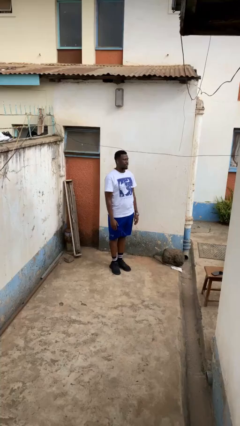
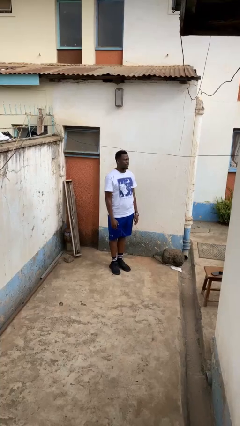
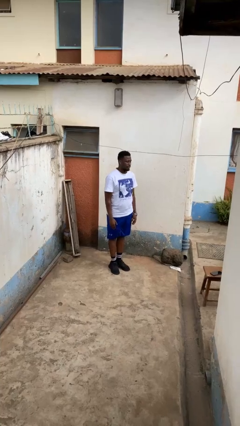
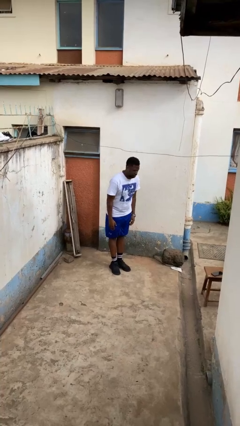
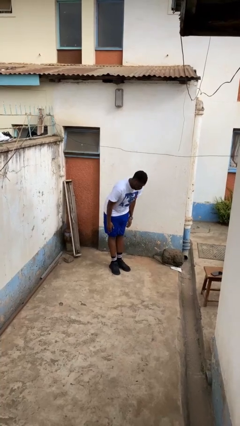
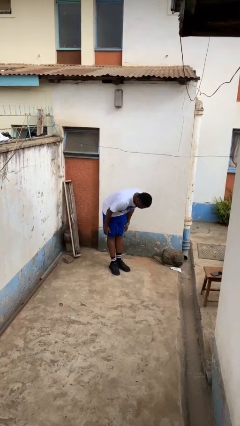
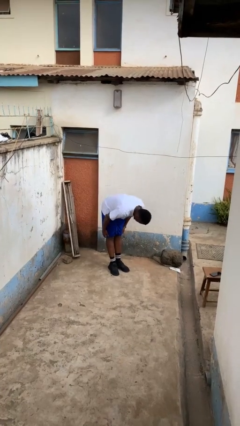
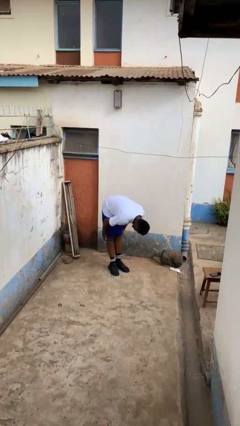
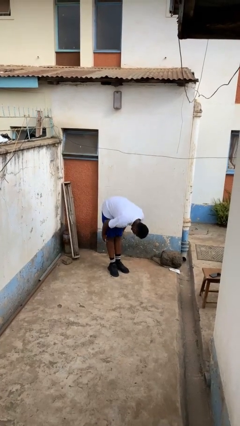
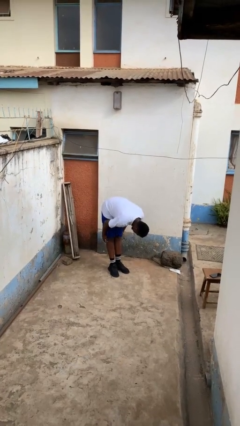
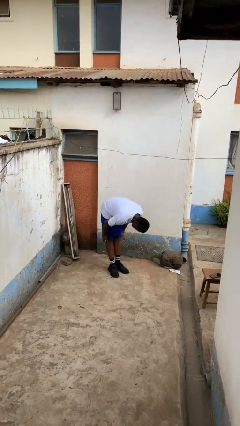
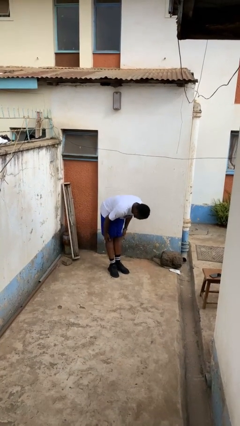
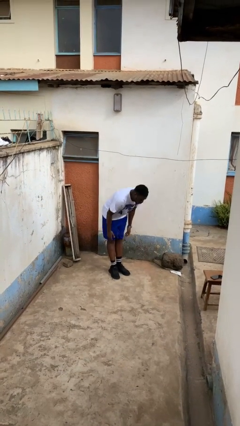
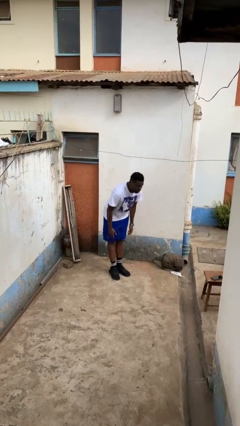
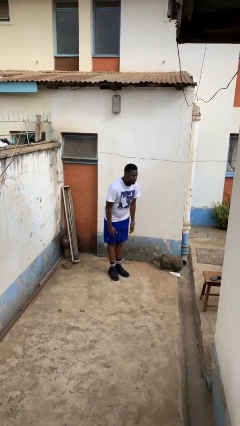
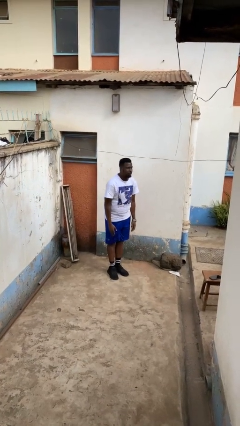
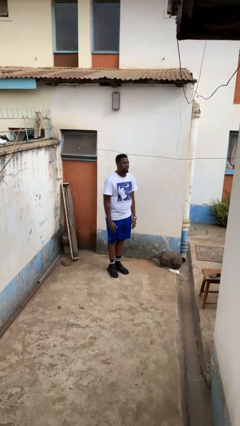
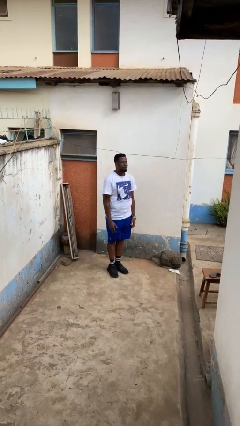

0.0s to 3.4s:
person bows

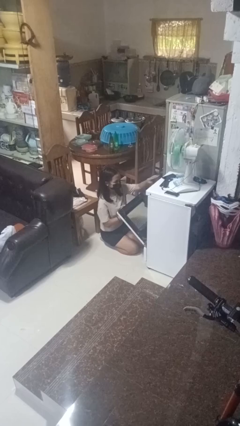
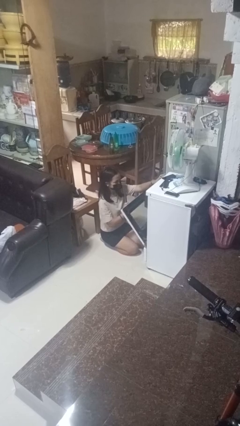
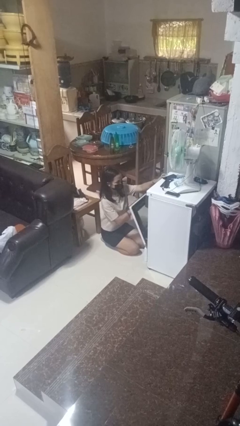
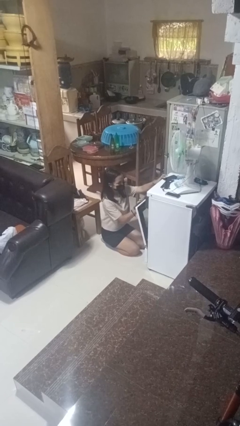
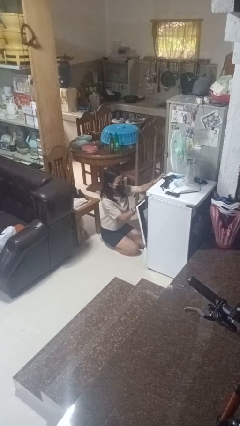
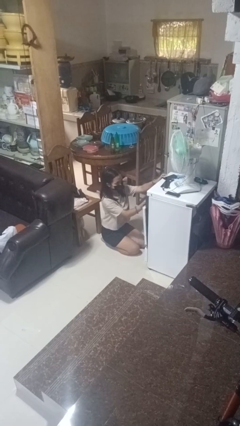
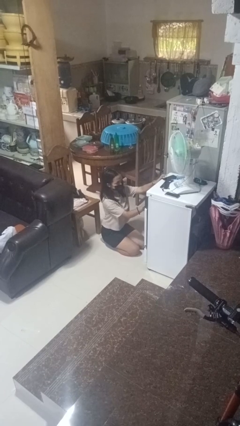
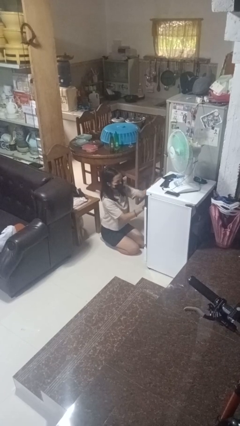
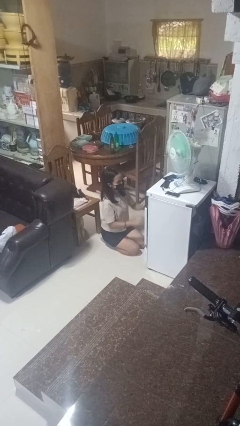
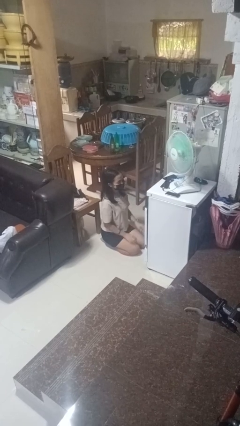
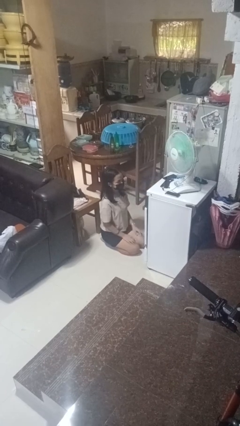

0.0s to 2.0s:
person closes oven door

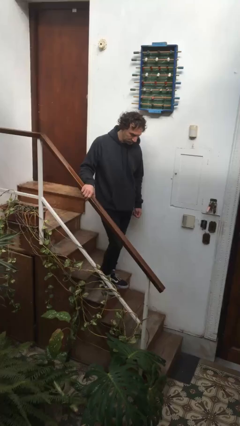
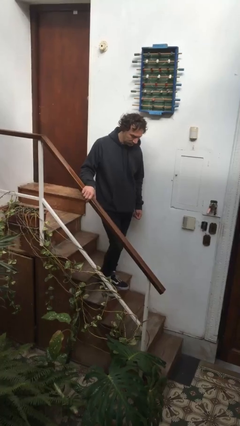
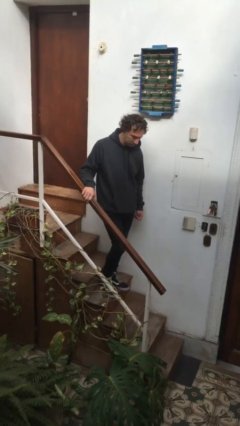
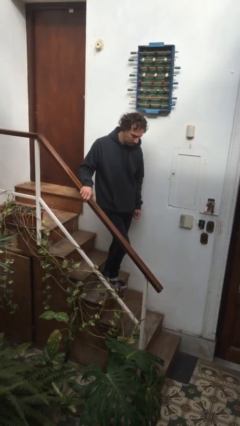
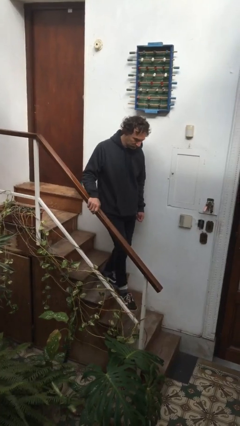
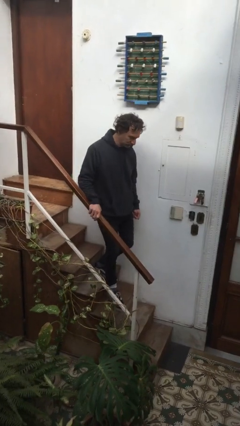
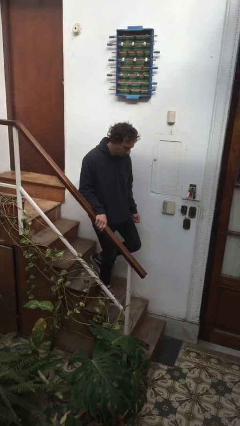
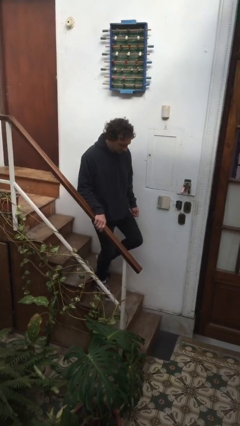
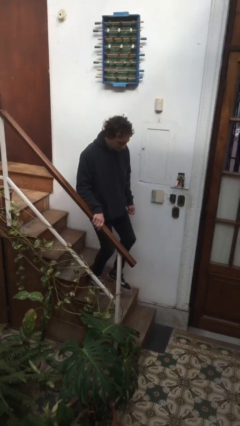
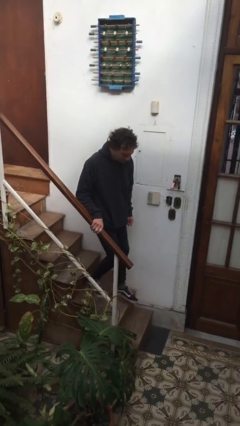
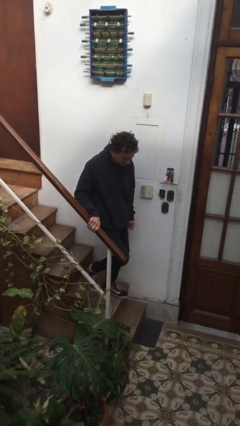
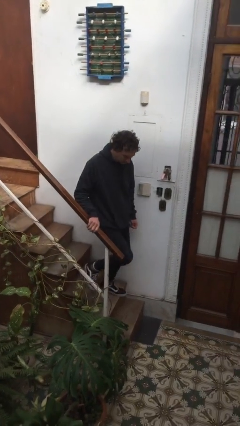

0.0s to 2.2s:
person climbs down stairs

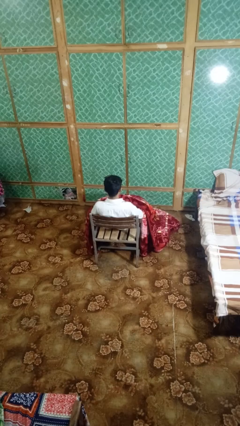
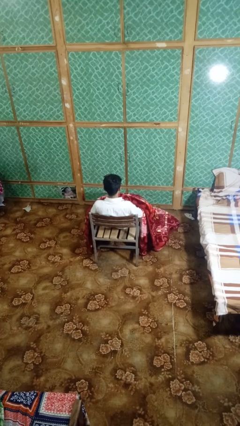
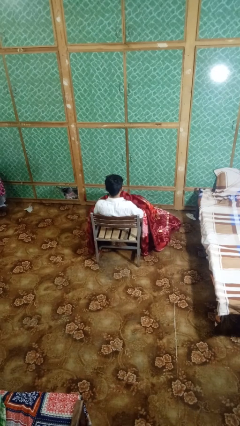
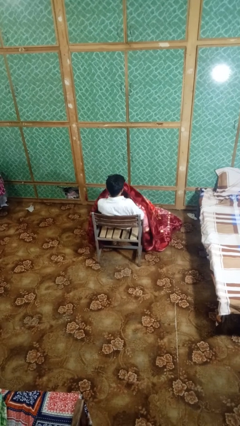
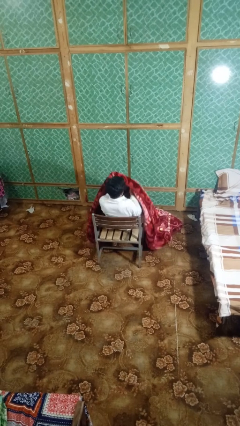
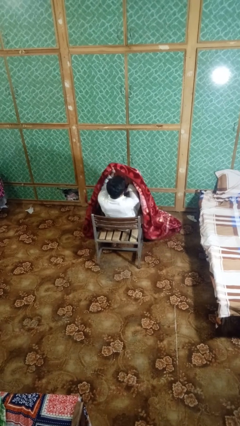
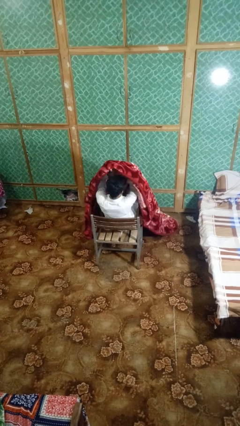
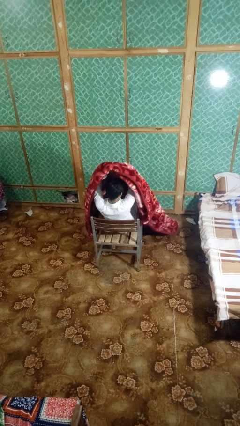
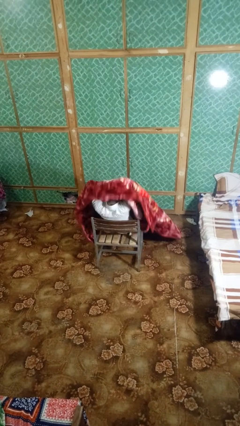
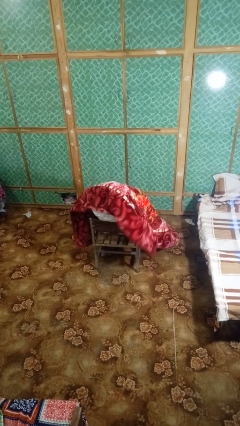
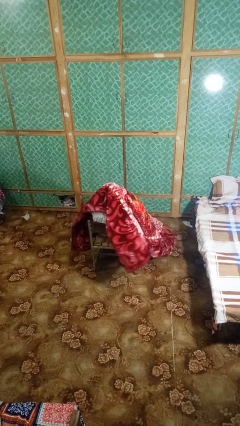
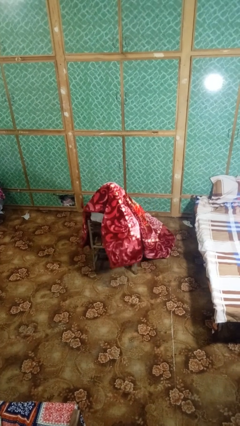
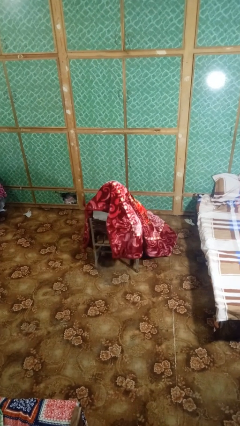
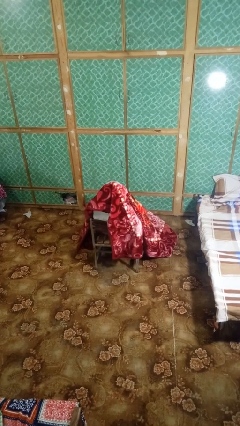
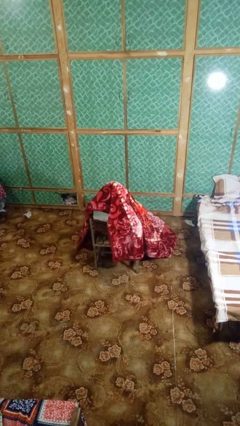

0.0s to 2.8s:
person covers with blanket

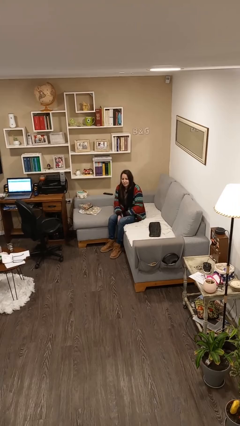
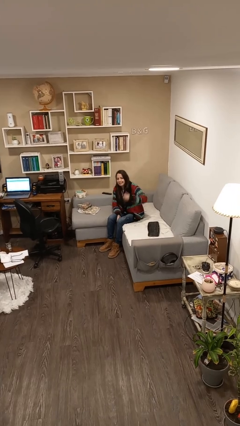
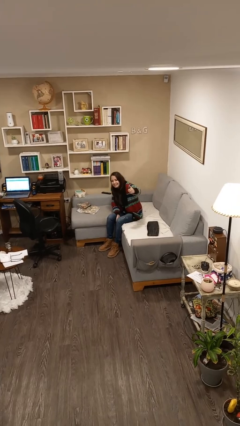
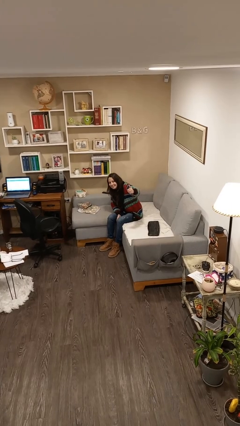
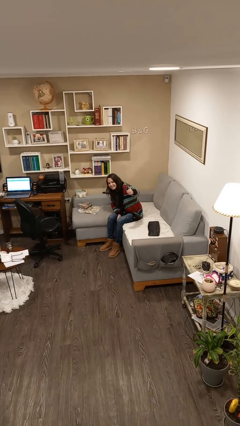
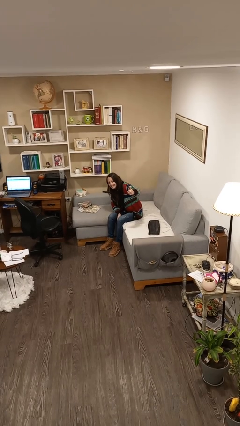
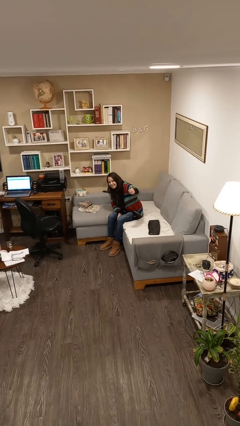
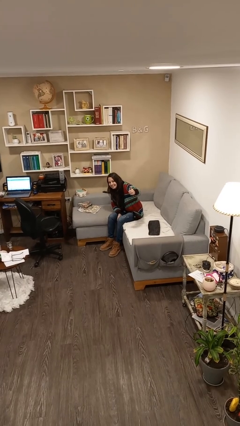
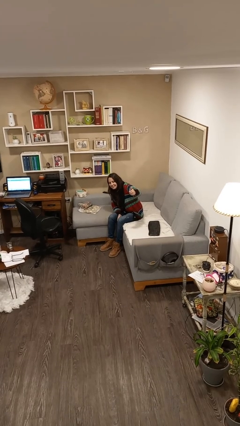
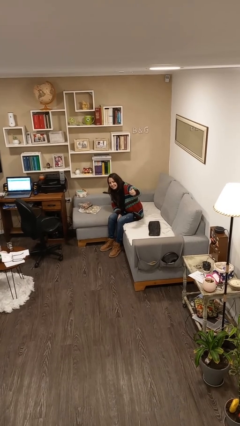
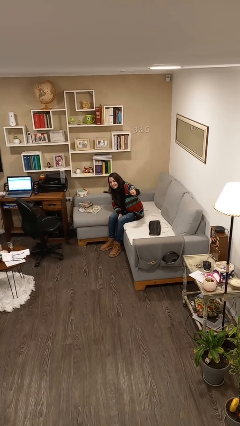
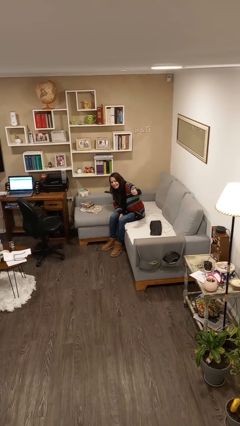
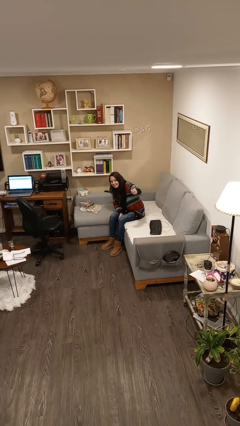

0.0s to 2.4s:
person gestures thumbs up

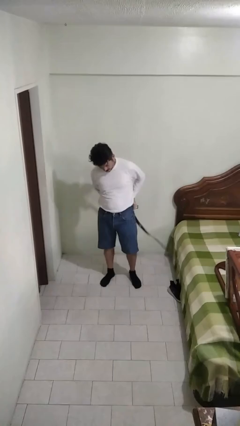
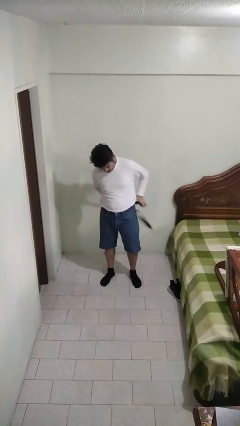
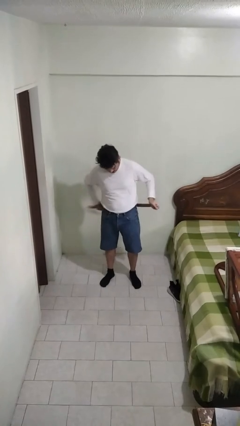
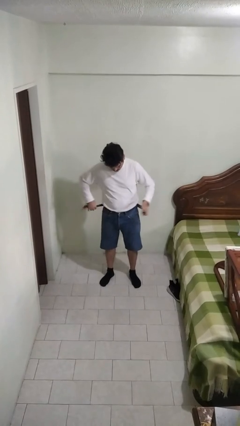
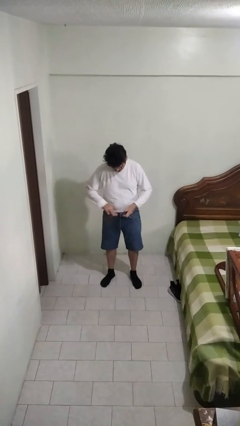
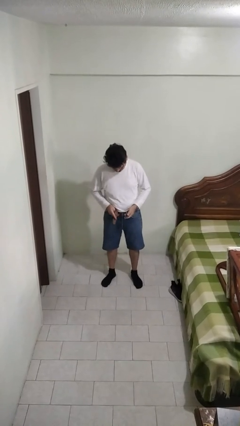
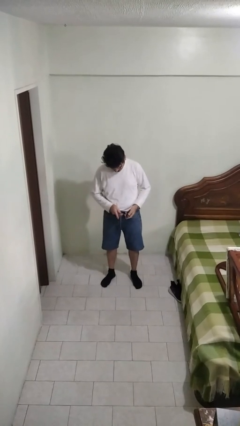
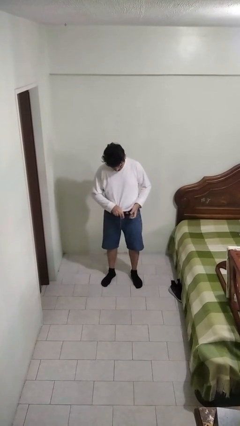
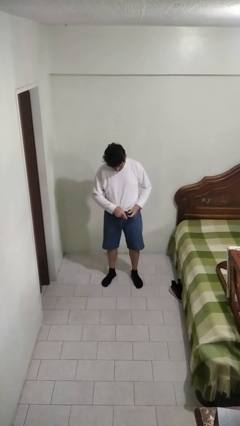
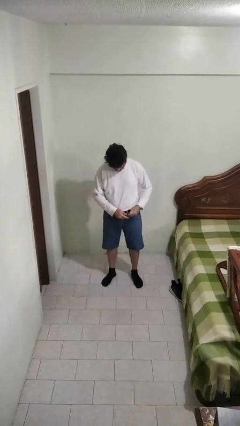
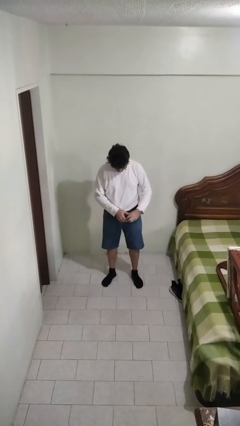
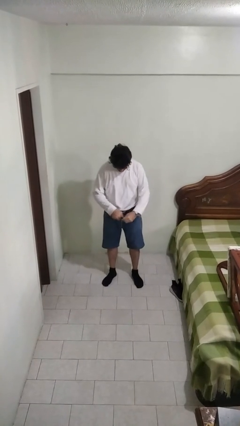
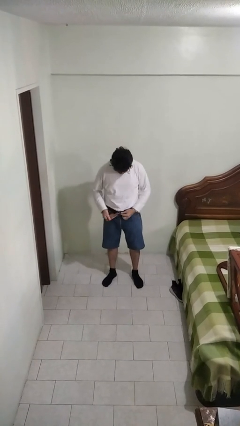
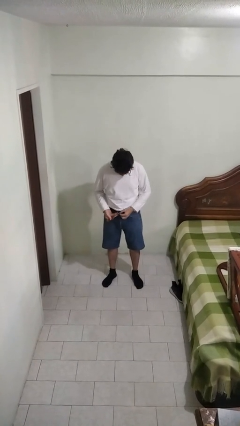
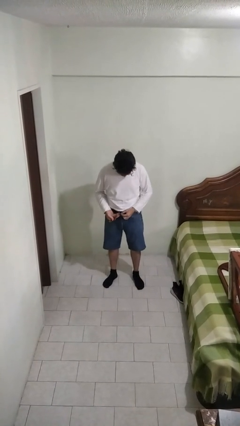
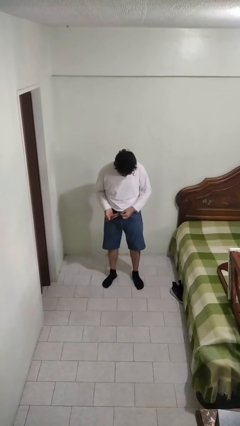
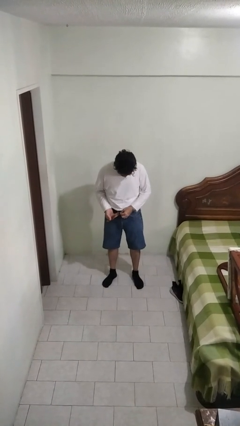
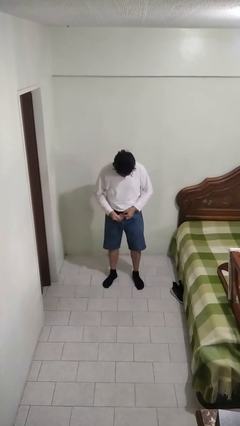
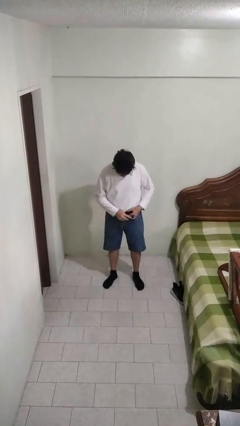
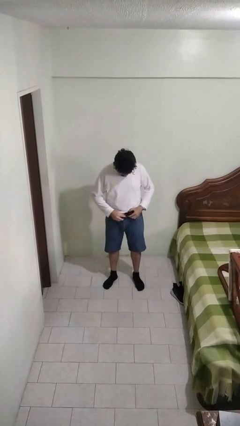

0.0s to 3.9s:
person puts on belt

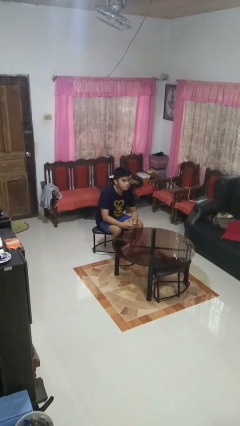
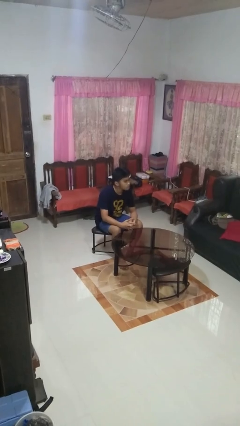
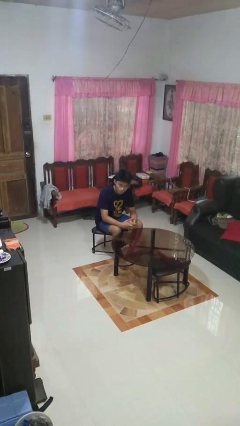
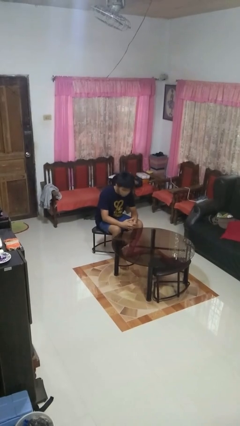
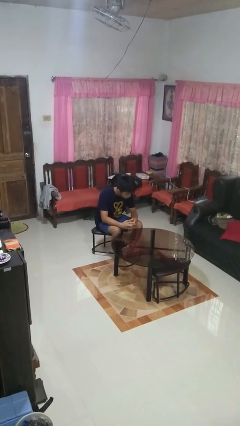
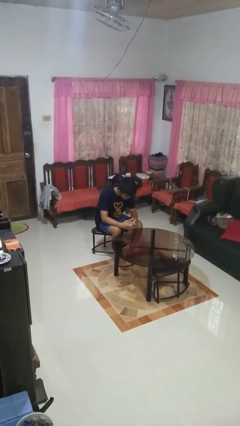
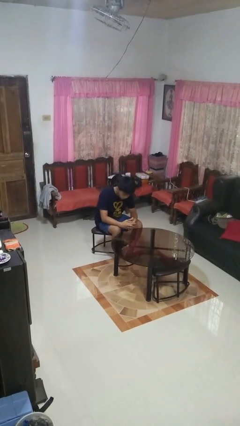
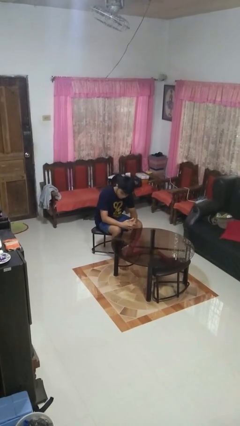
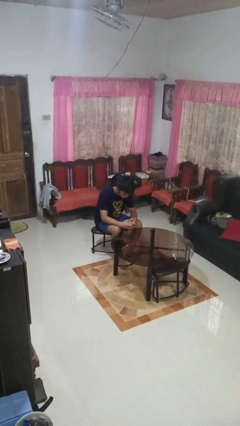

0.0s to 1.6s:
person shakes head
